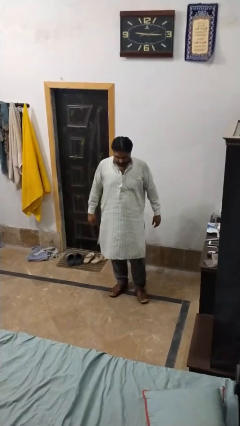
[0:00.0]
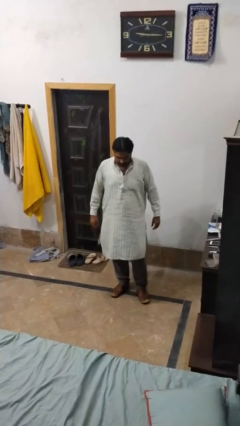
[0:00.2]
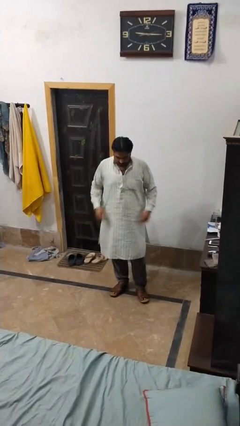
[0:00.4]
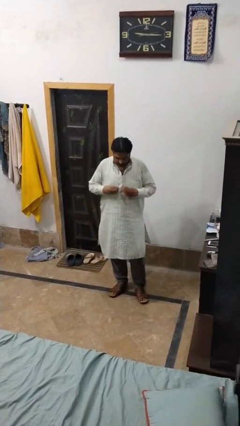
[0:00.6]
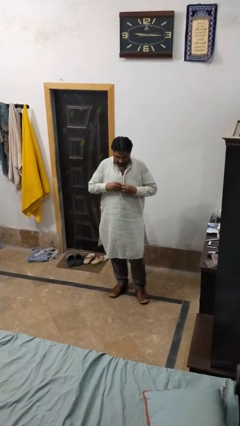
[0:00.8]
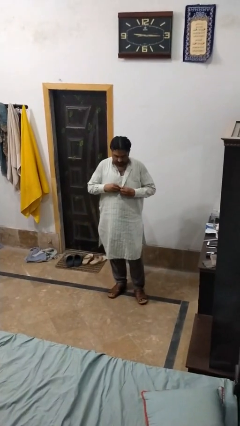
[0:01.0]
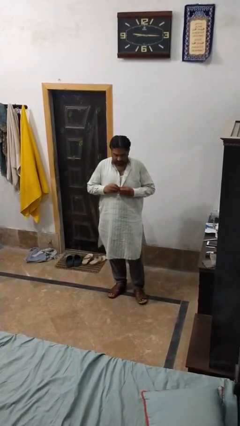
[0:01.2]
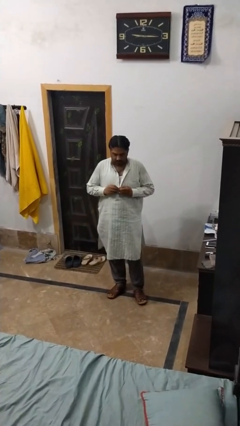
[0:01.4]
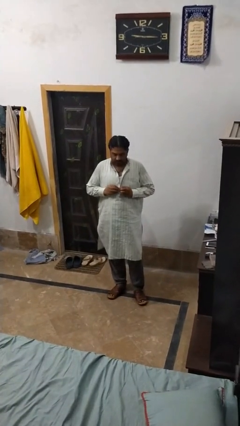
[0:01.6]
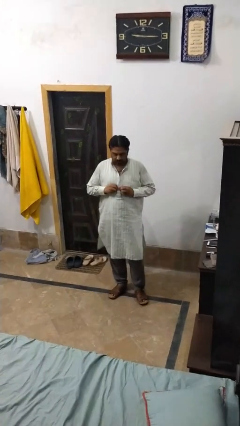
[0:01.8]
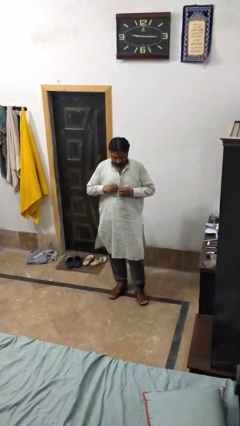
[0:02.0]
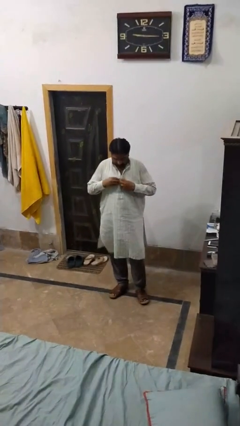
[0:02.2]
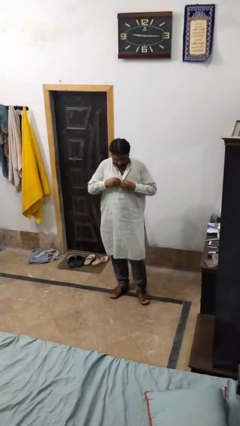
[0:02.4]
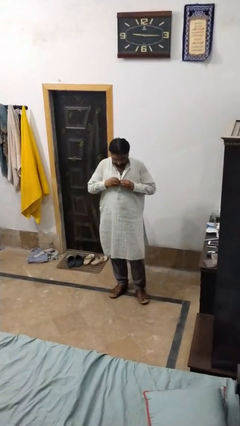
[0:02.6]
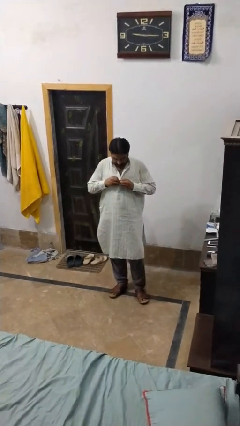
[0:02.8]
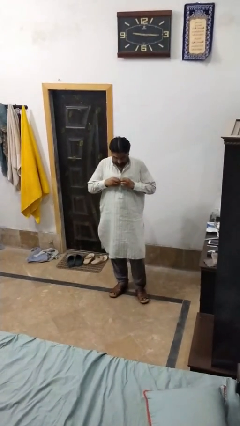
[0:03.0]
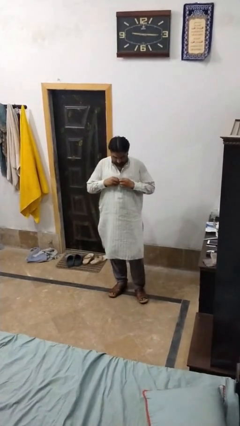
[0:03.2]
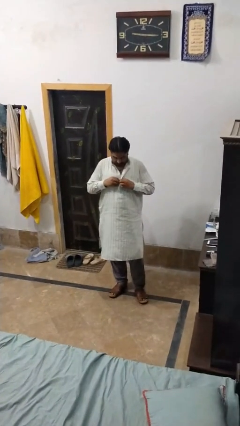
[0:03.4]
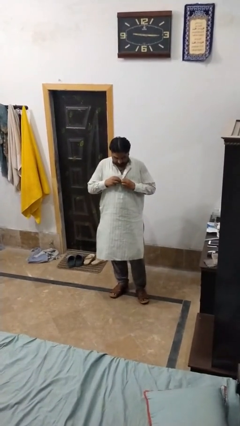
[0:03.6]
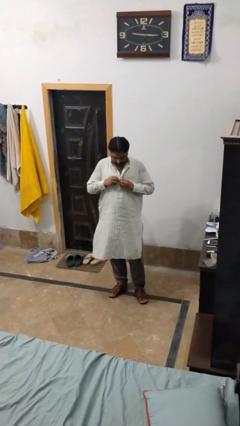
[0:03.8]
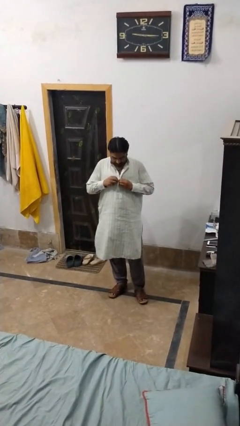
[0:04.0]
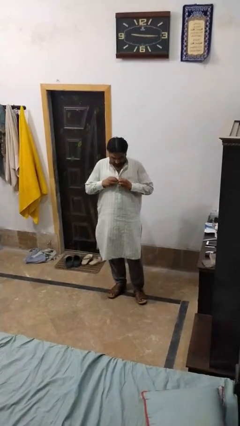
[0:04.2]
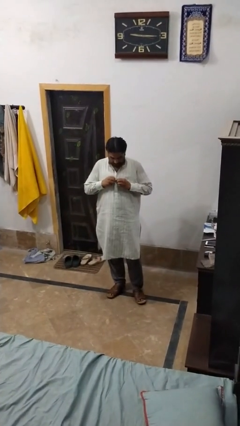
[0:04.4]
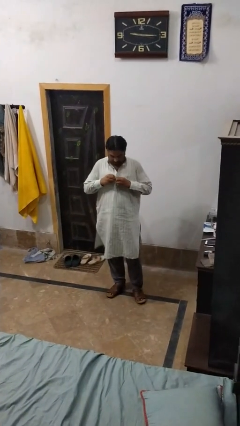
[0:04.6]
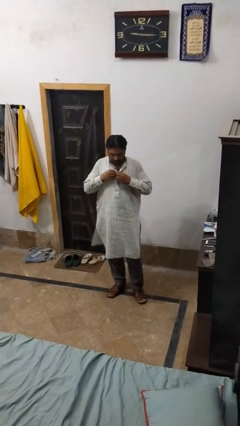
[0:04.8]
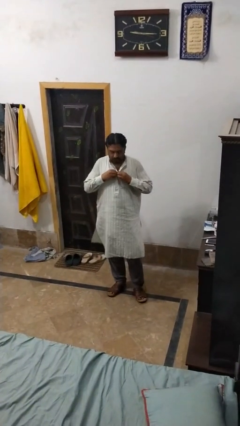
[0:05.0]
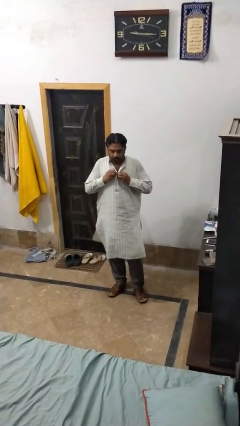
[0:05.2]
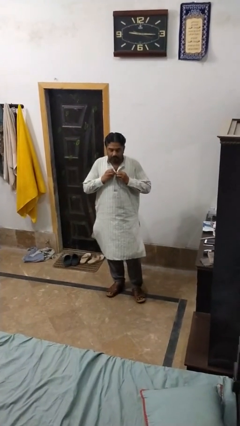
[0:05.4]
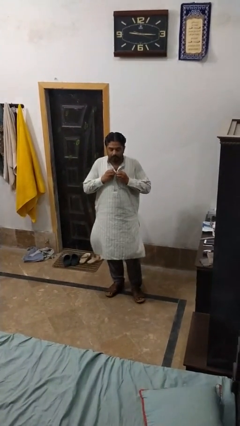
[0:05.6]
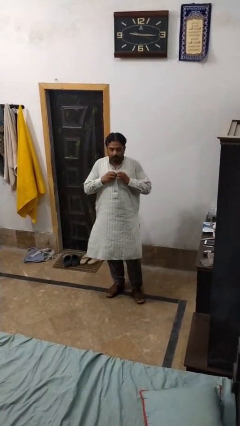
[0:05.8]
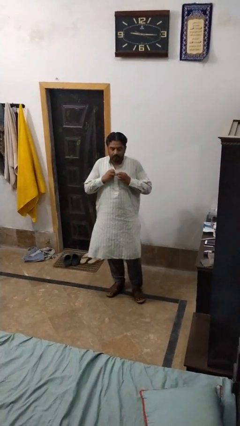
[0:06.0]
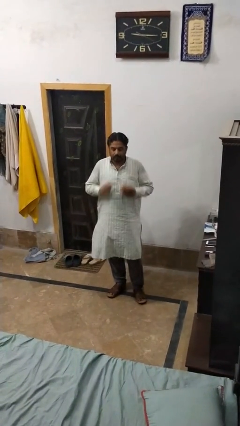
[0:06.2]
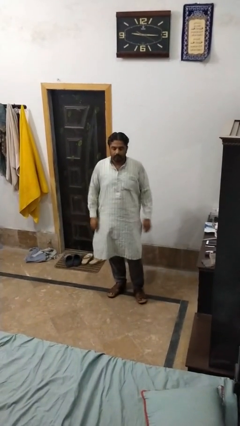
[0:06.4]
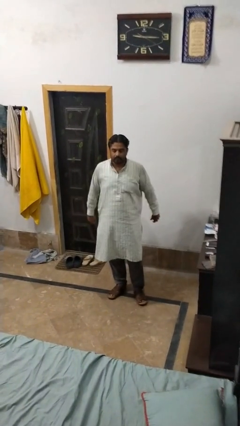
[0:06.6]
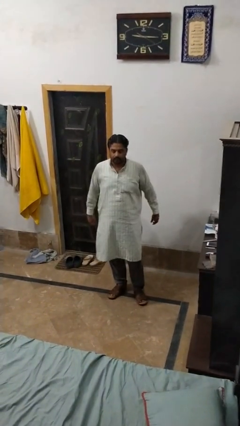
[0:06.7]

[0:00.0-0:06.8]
person buttons shirt

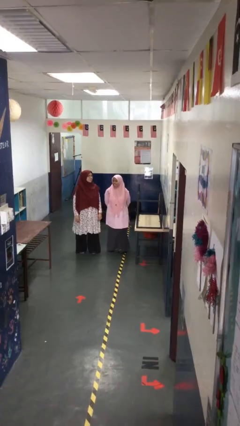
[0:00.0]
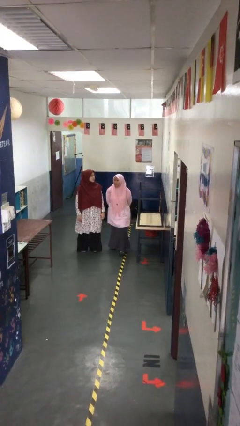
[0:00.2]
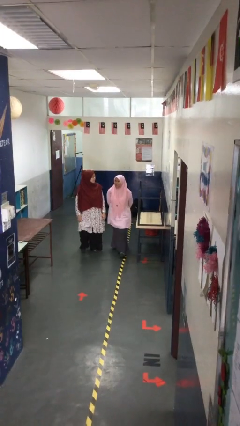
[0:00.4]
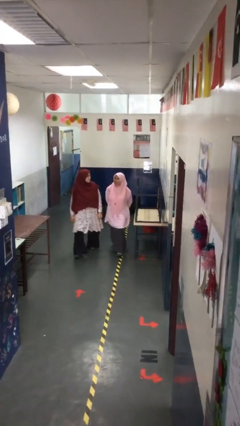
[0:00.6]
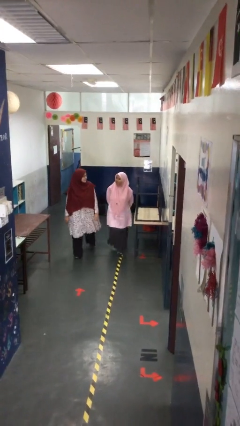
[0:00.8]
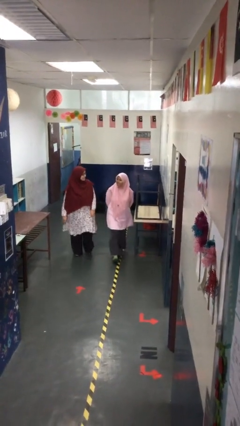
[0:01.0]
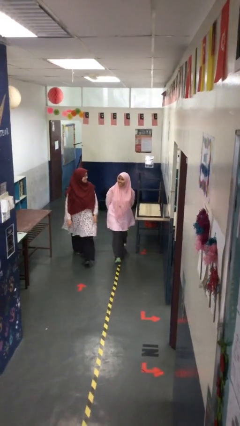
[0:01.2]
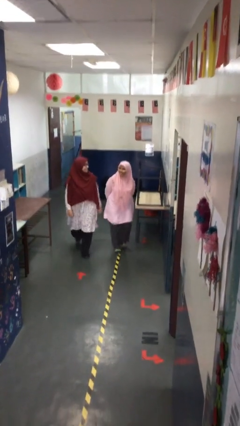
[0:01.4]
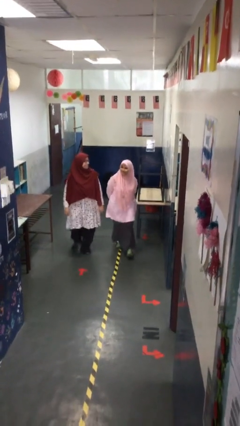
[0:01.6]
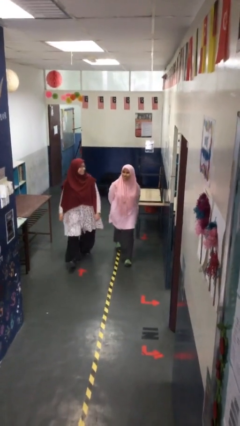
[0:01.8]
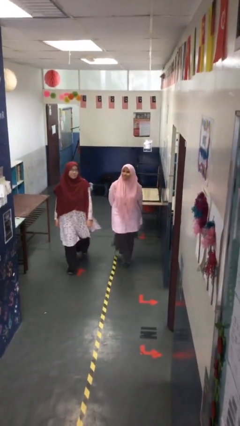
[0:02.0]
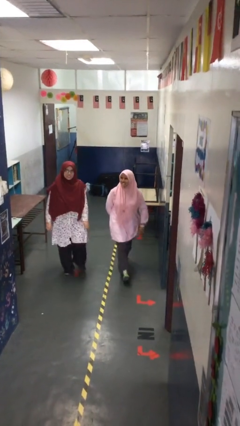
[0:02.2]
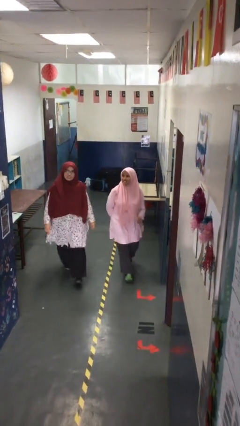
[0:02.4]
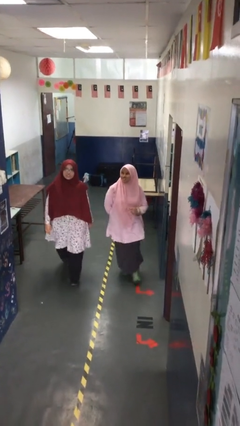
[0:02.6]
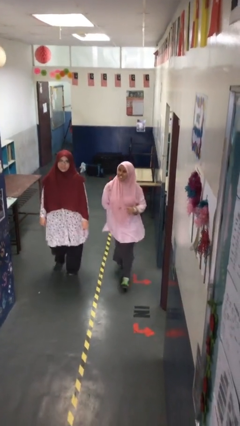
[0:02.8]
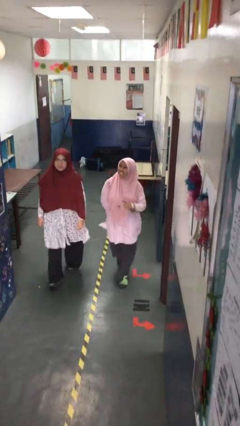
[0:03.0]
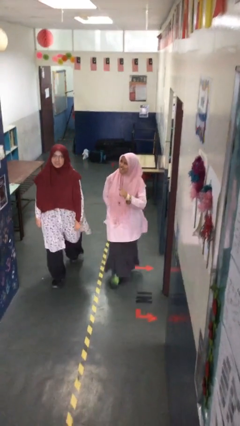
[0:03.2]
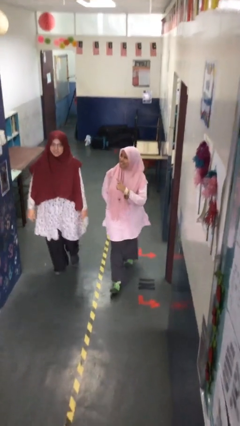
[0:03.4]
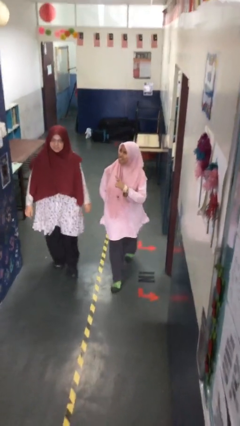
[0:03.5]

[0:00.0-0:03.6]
person talks to person

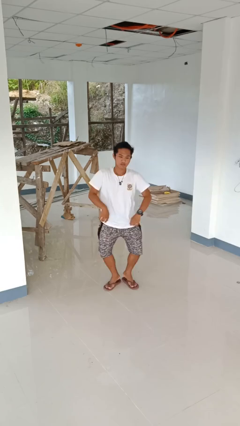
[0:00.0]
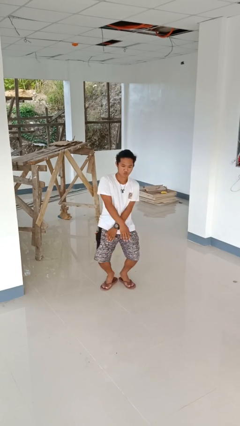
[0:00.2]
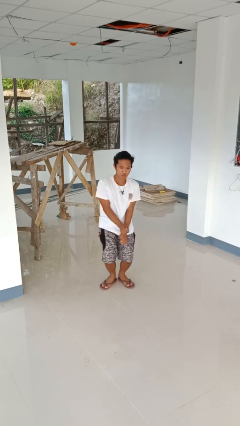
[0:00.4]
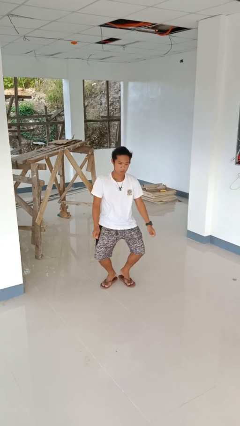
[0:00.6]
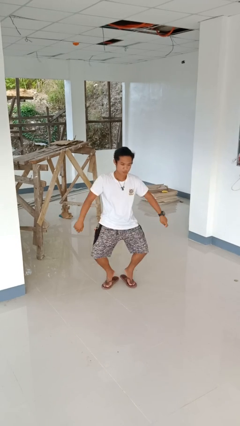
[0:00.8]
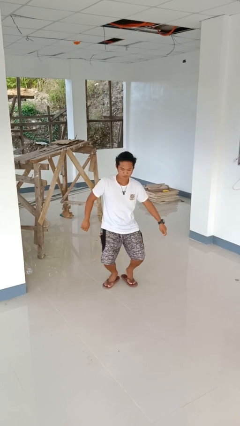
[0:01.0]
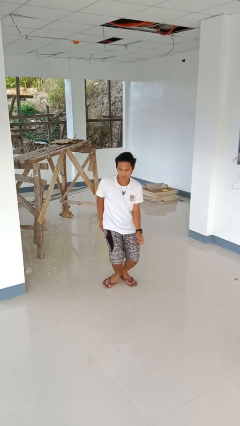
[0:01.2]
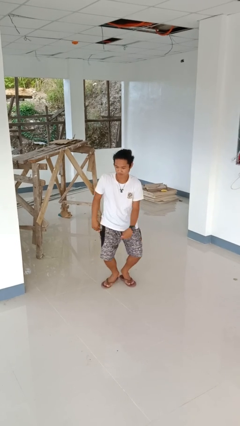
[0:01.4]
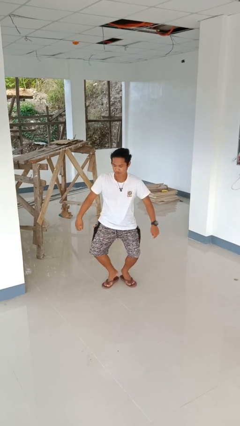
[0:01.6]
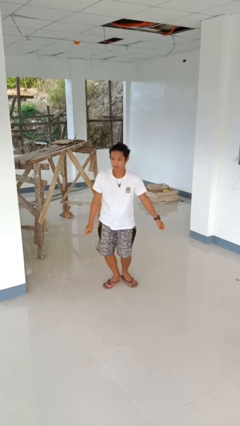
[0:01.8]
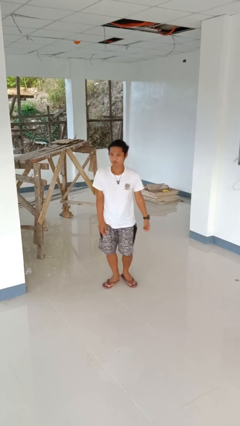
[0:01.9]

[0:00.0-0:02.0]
person dances in place

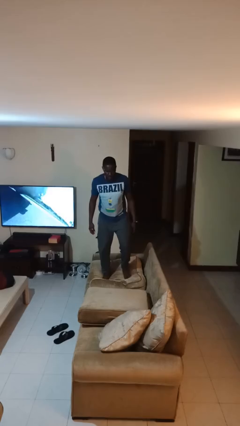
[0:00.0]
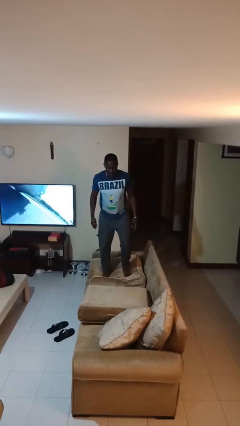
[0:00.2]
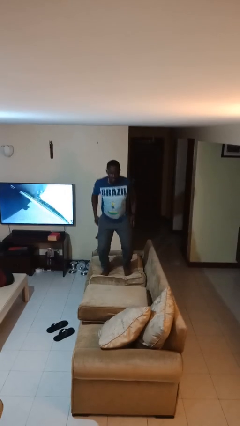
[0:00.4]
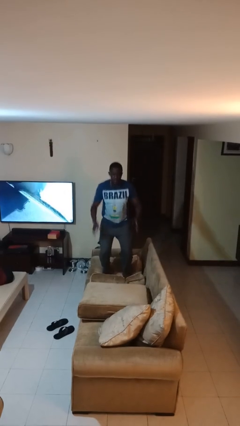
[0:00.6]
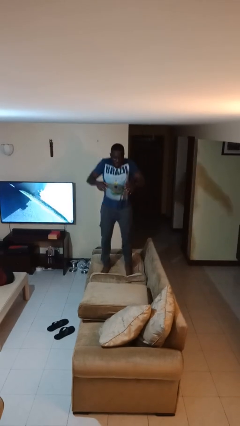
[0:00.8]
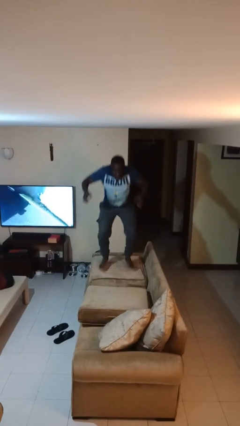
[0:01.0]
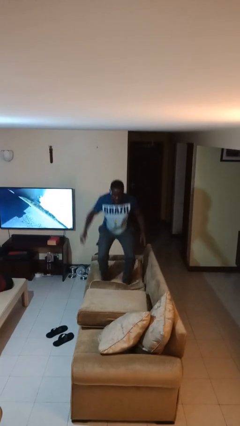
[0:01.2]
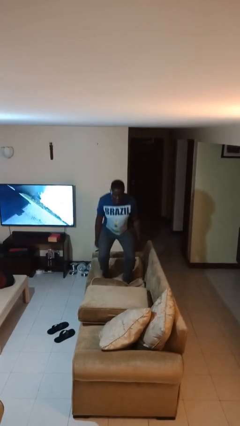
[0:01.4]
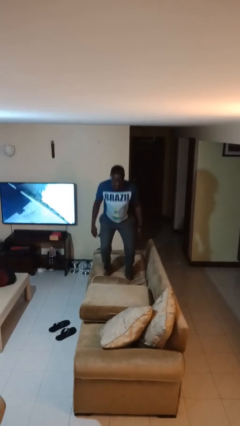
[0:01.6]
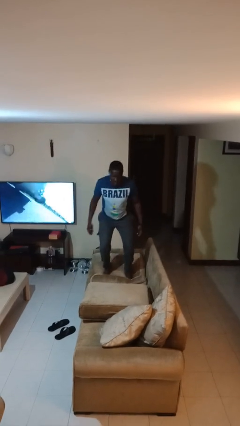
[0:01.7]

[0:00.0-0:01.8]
person jumps on couch

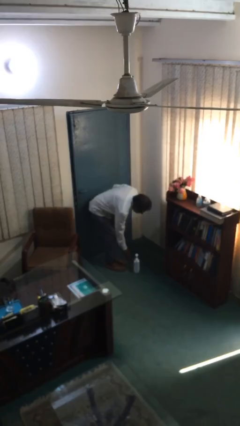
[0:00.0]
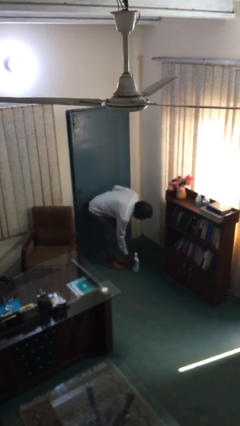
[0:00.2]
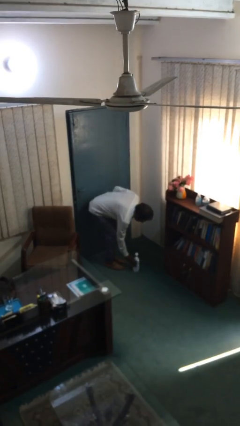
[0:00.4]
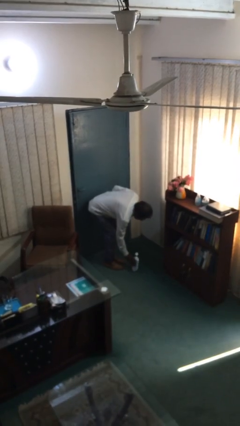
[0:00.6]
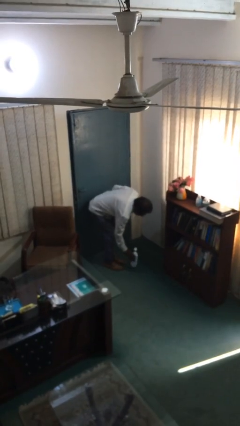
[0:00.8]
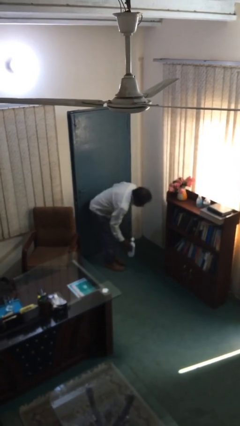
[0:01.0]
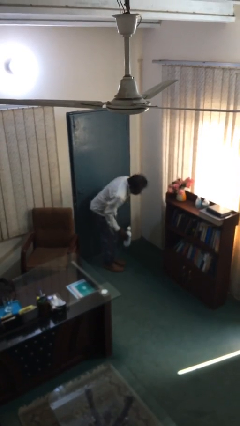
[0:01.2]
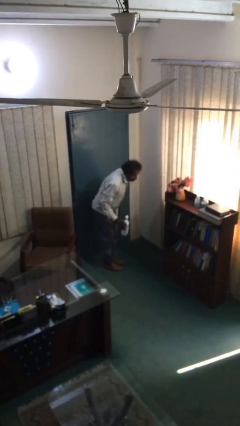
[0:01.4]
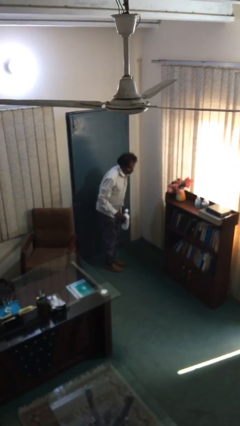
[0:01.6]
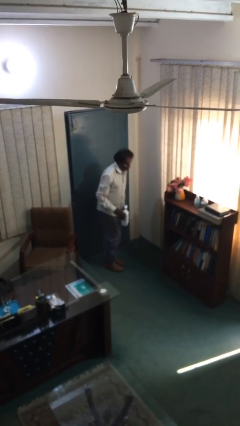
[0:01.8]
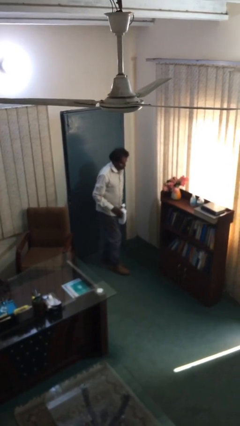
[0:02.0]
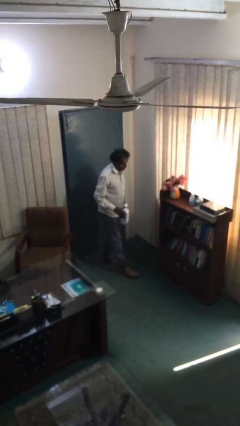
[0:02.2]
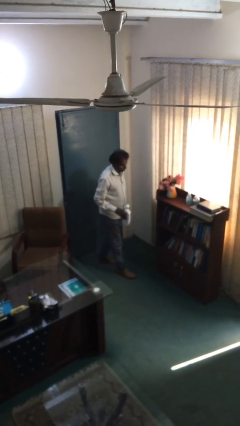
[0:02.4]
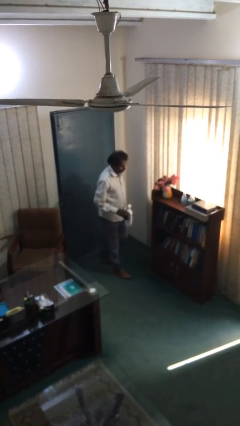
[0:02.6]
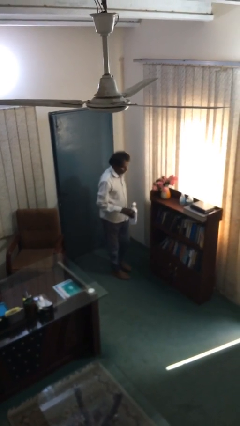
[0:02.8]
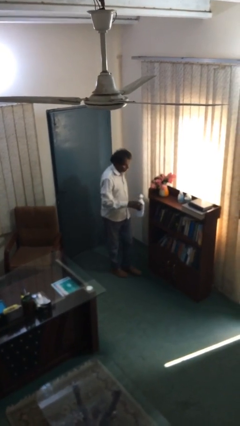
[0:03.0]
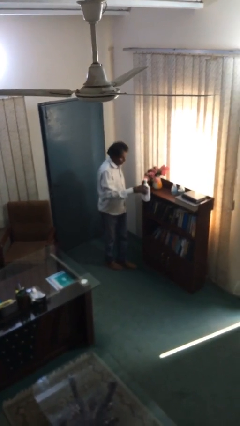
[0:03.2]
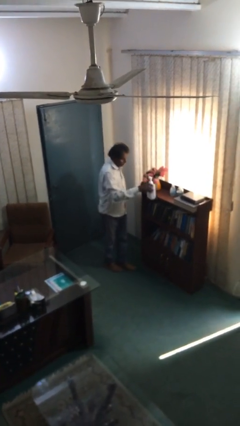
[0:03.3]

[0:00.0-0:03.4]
person picks up object from floor

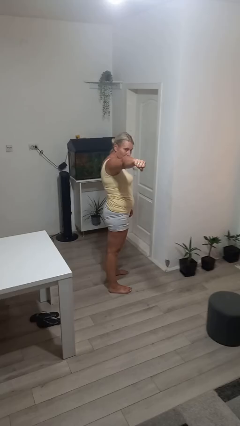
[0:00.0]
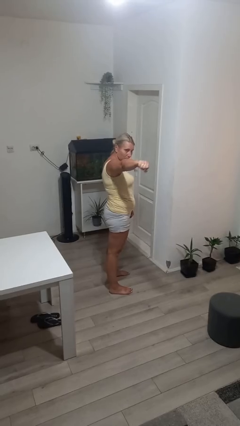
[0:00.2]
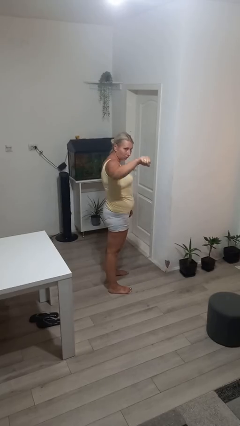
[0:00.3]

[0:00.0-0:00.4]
person karate chop
